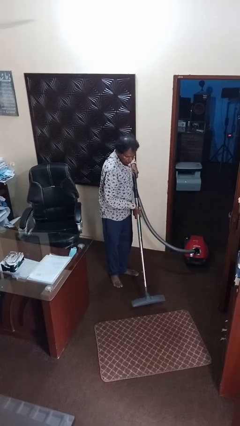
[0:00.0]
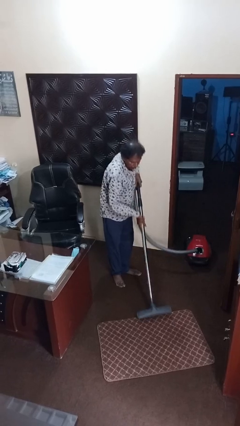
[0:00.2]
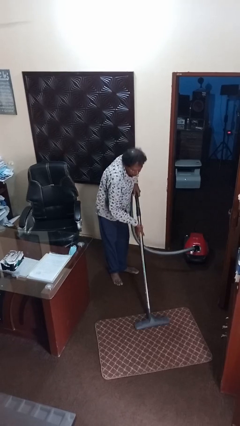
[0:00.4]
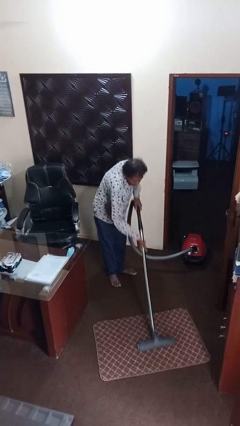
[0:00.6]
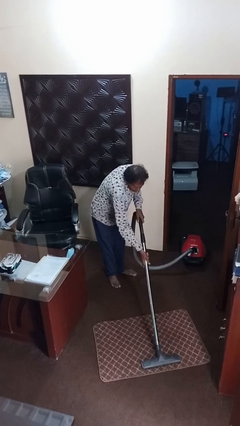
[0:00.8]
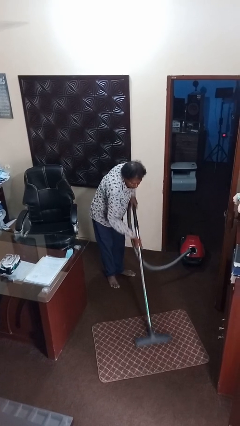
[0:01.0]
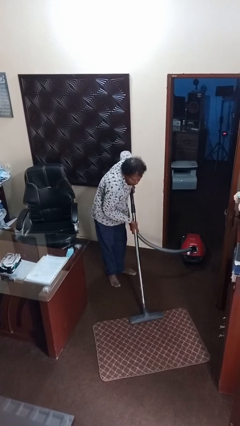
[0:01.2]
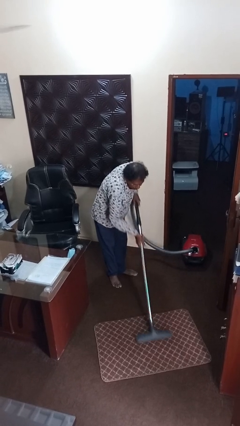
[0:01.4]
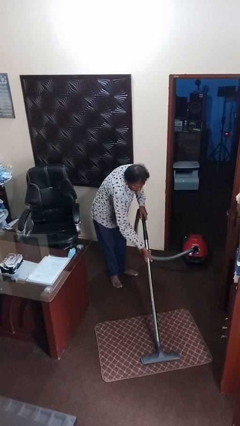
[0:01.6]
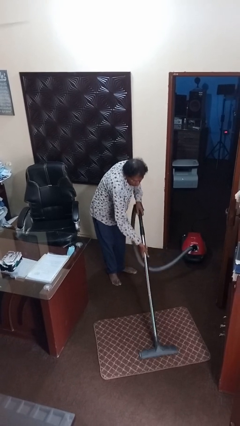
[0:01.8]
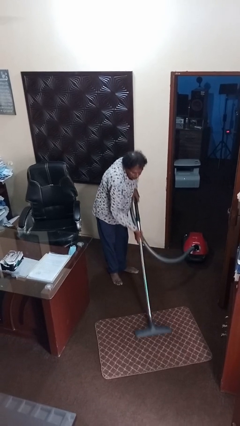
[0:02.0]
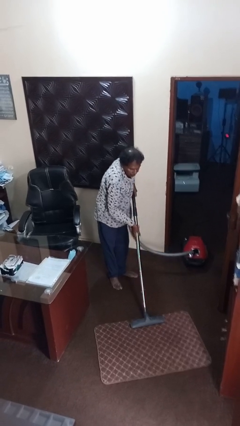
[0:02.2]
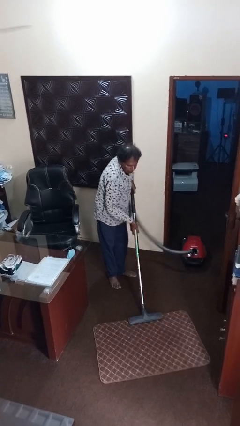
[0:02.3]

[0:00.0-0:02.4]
person vacuums carpet

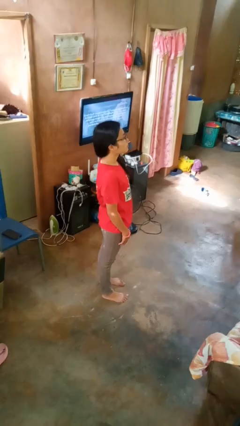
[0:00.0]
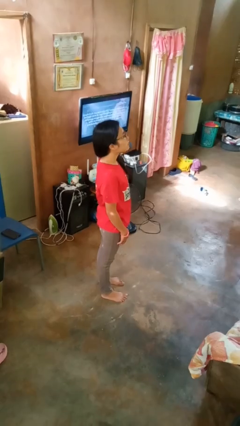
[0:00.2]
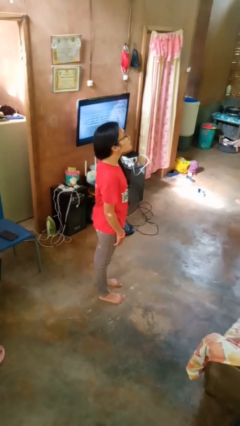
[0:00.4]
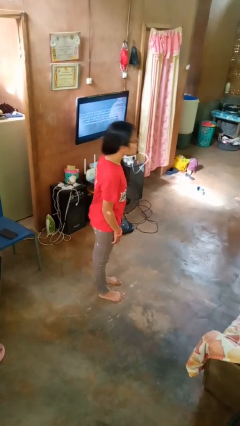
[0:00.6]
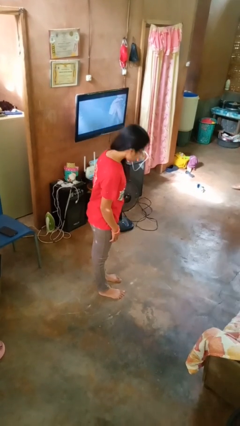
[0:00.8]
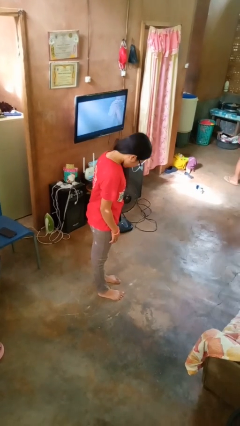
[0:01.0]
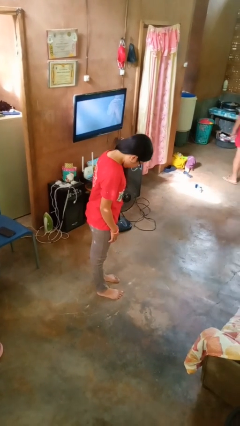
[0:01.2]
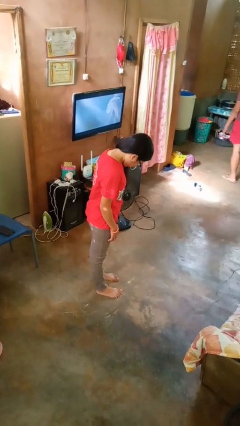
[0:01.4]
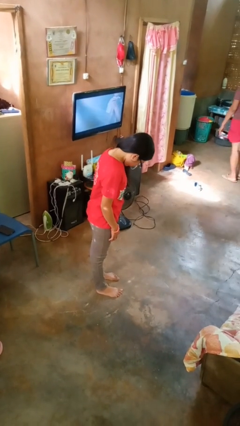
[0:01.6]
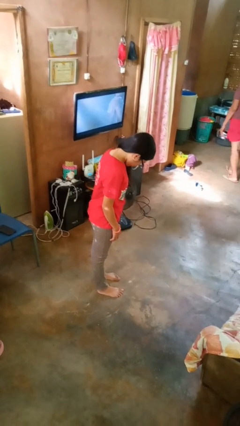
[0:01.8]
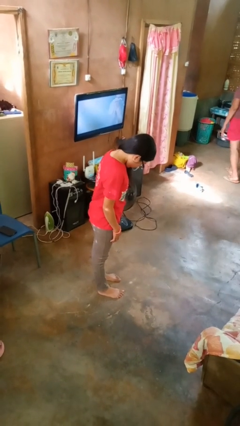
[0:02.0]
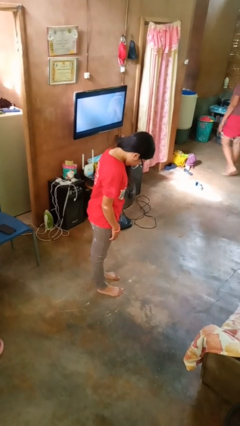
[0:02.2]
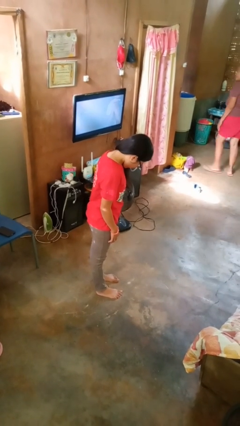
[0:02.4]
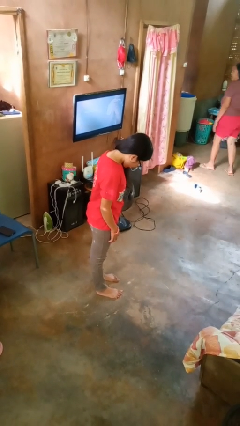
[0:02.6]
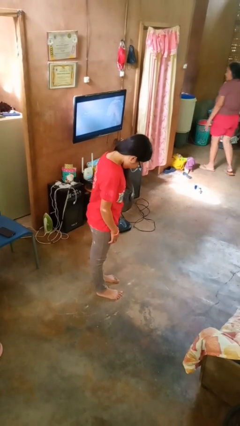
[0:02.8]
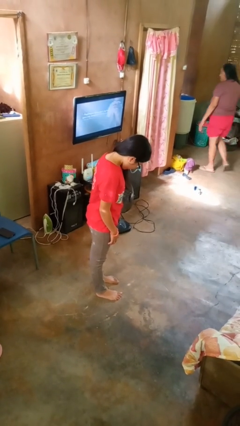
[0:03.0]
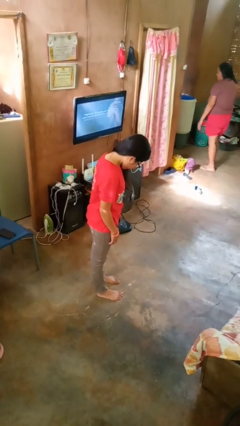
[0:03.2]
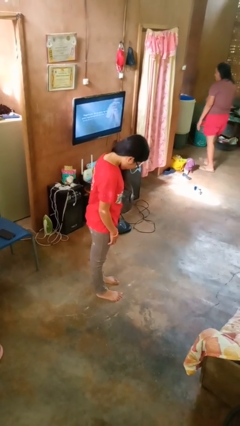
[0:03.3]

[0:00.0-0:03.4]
person bows

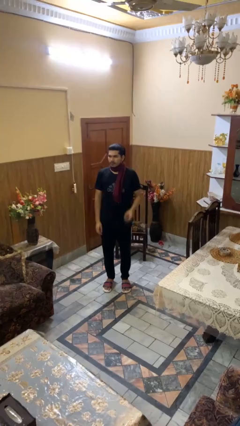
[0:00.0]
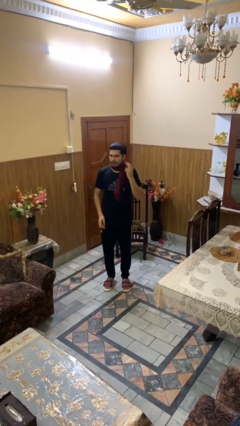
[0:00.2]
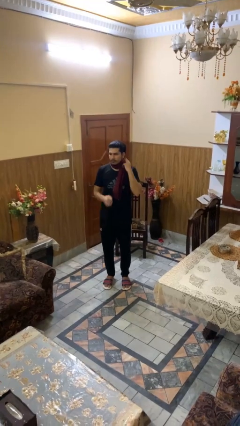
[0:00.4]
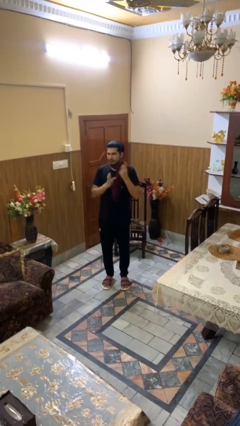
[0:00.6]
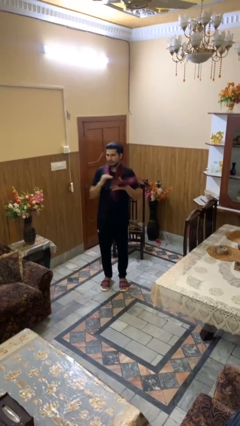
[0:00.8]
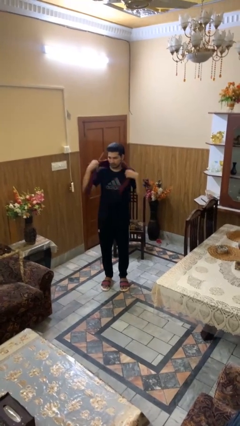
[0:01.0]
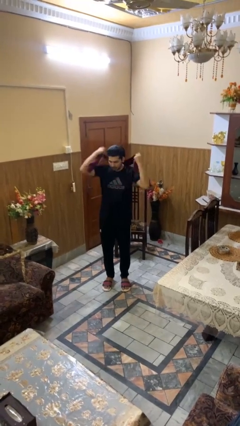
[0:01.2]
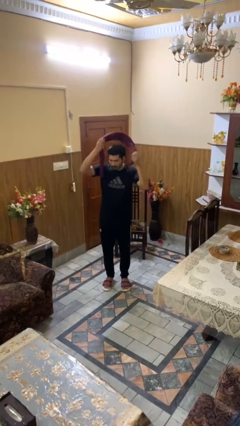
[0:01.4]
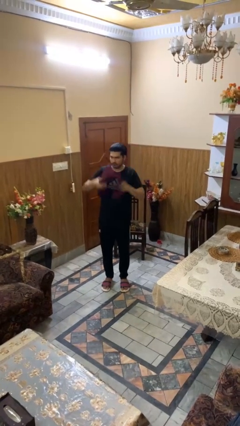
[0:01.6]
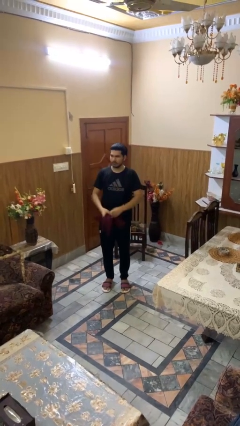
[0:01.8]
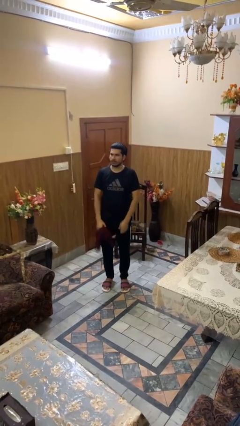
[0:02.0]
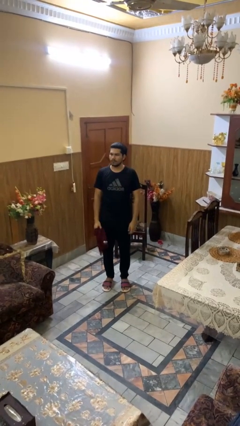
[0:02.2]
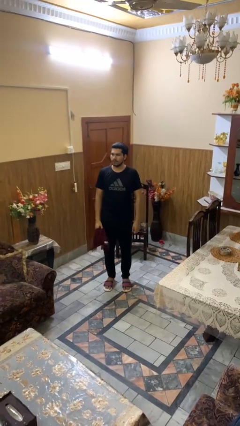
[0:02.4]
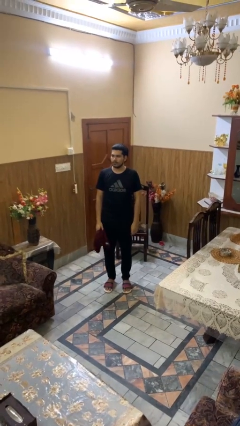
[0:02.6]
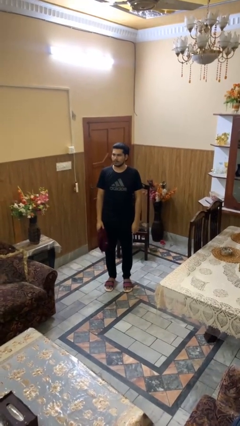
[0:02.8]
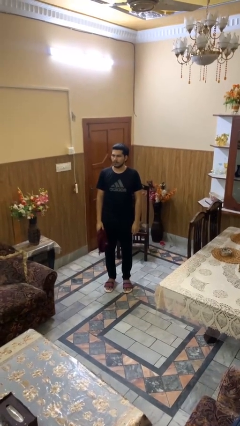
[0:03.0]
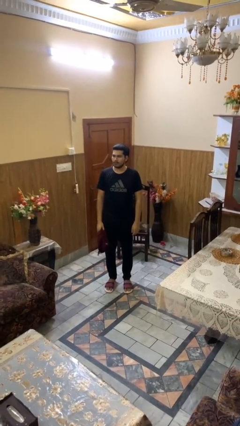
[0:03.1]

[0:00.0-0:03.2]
person takes off scarf

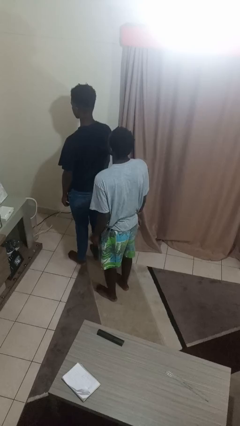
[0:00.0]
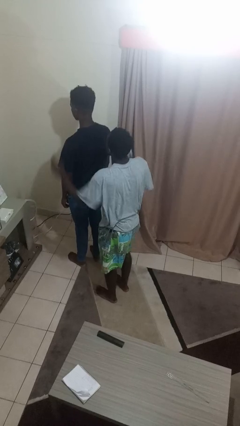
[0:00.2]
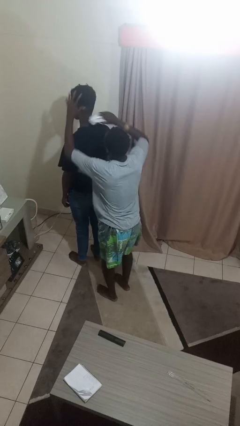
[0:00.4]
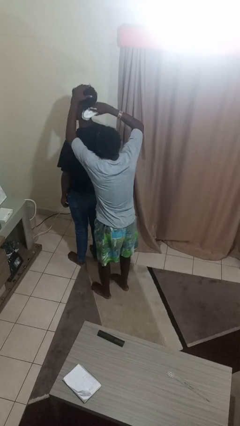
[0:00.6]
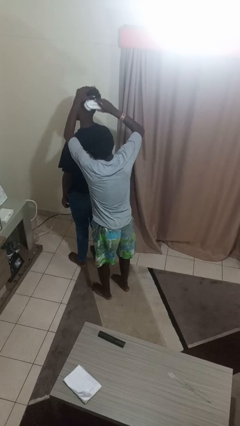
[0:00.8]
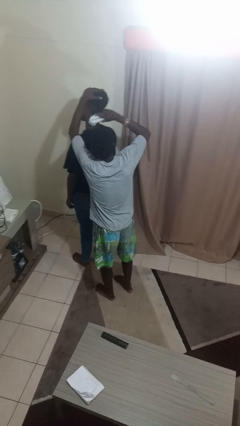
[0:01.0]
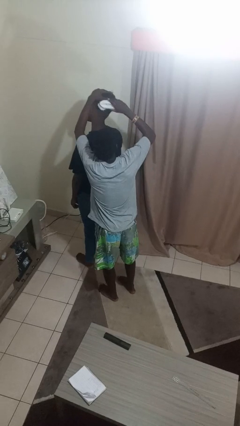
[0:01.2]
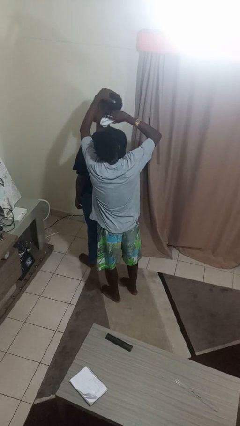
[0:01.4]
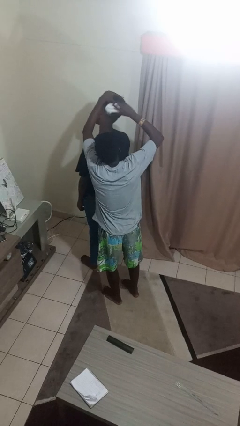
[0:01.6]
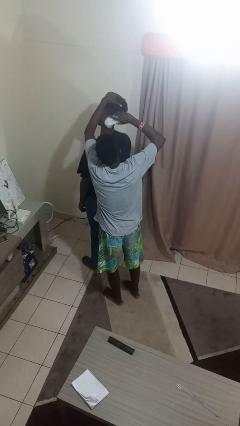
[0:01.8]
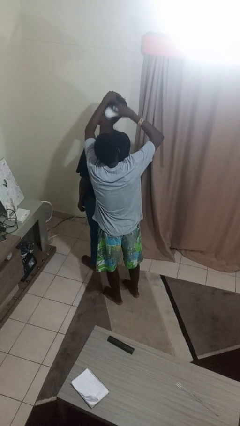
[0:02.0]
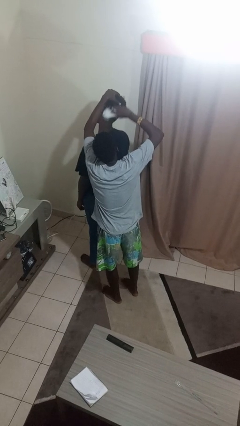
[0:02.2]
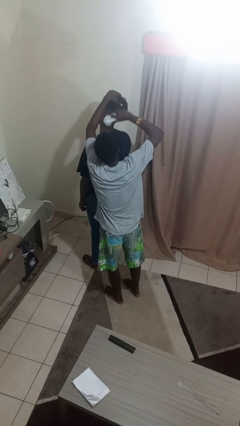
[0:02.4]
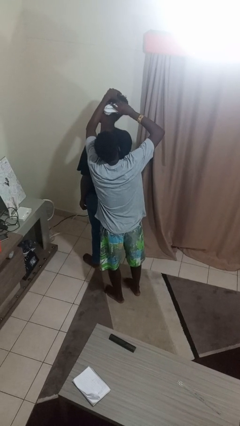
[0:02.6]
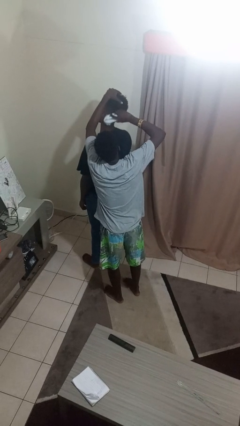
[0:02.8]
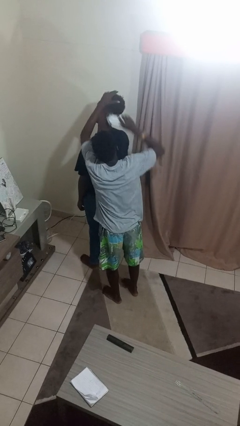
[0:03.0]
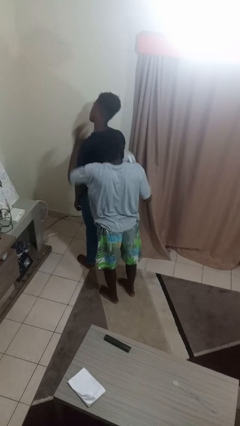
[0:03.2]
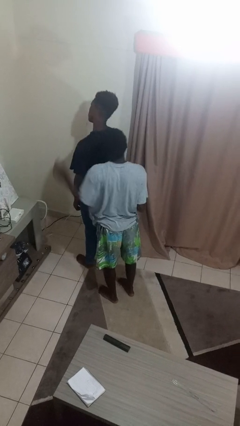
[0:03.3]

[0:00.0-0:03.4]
person brushes hair of person

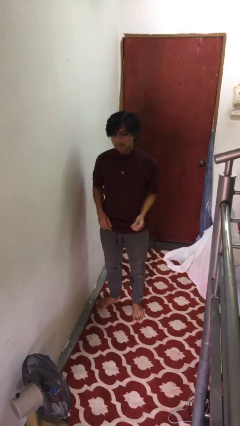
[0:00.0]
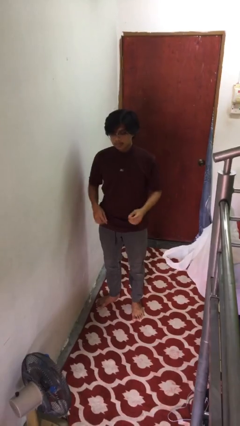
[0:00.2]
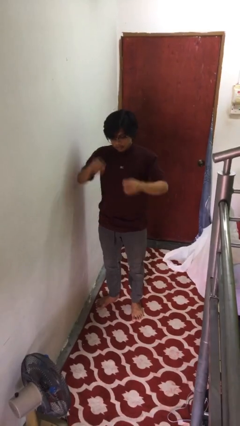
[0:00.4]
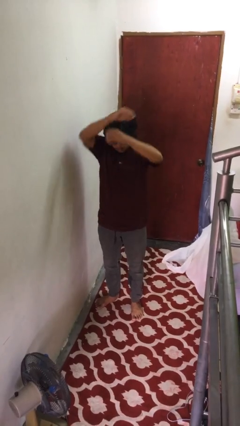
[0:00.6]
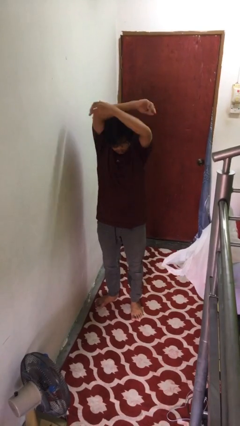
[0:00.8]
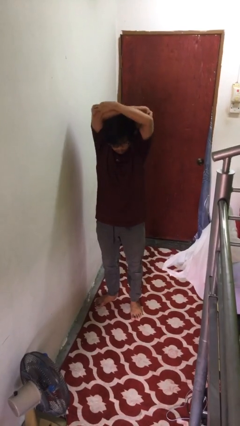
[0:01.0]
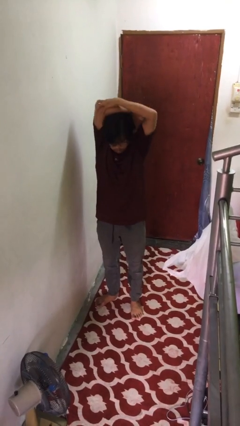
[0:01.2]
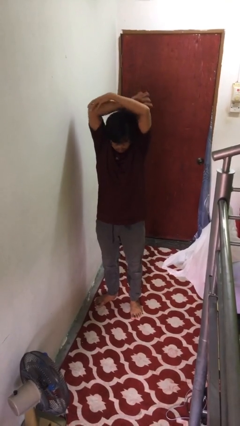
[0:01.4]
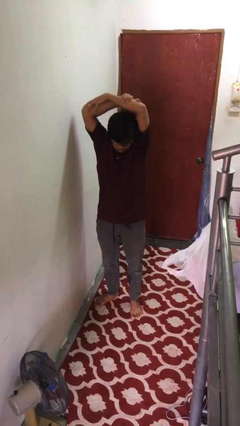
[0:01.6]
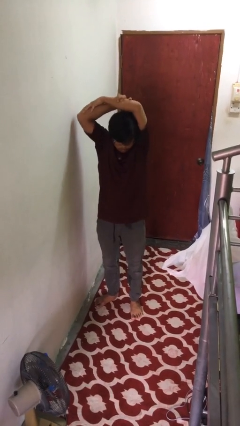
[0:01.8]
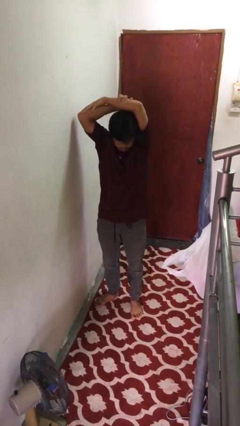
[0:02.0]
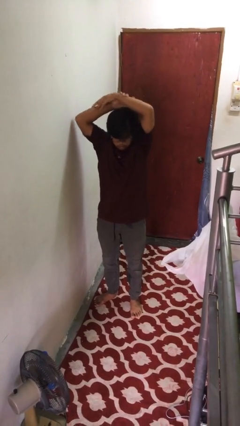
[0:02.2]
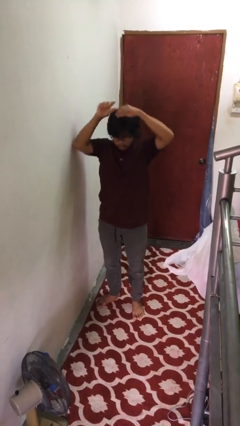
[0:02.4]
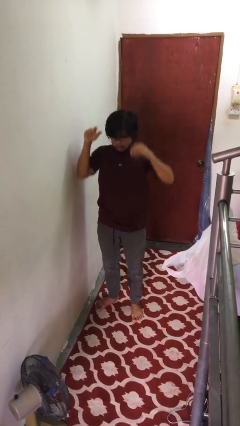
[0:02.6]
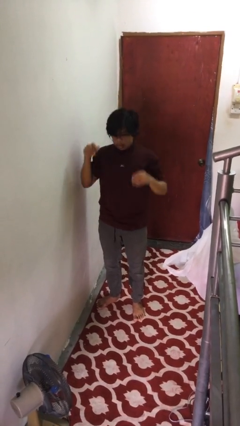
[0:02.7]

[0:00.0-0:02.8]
person stretches arms over head

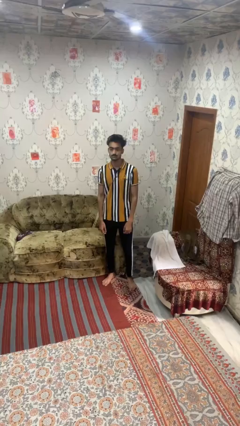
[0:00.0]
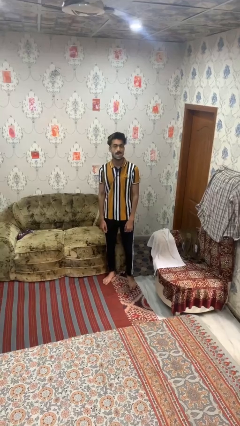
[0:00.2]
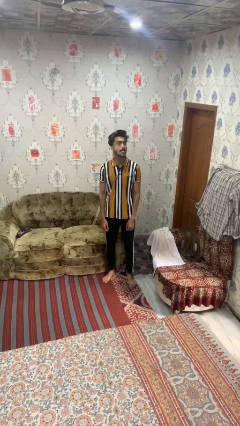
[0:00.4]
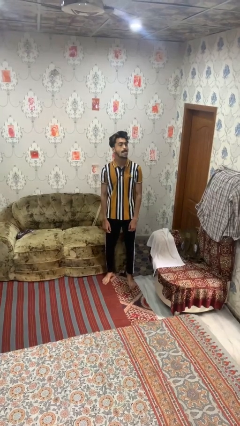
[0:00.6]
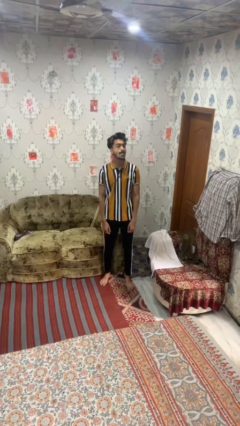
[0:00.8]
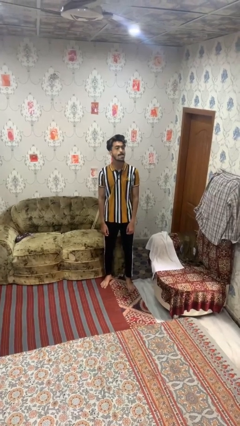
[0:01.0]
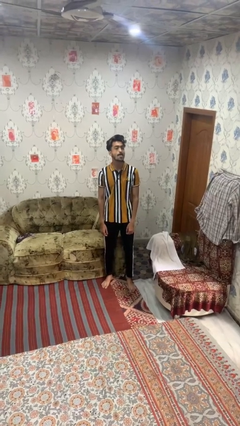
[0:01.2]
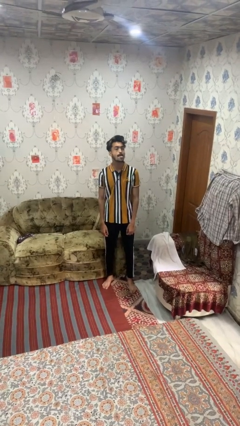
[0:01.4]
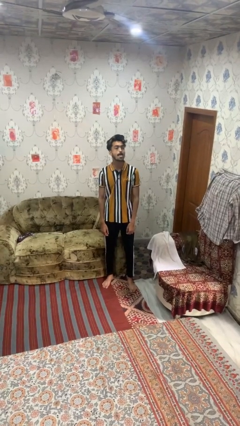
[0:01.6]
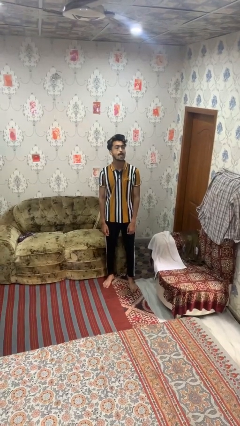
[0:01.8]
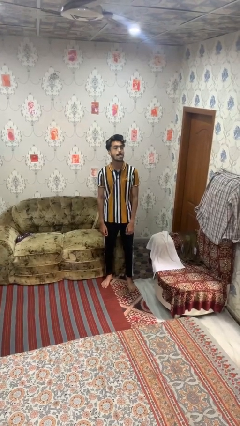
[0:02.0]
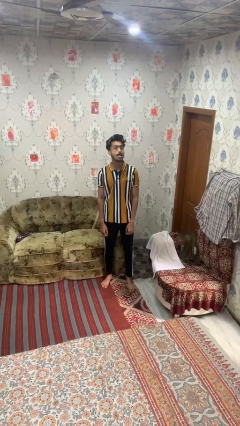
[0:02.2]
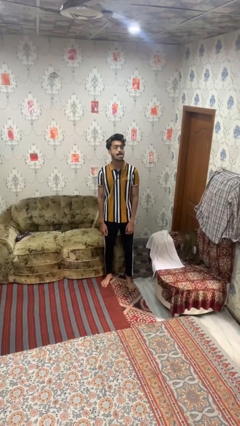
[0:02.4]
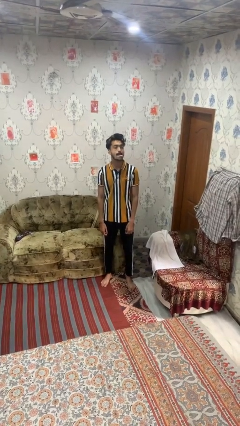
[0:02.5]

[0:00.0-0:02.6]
person sticks out tongue
